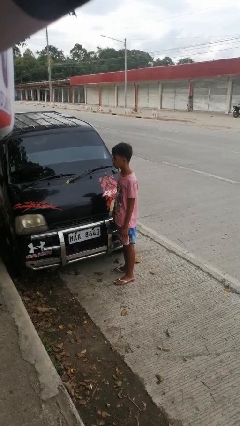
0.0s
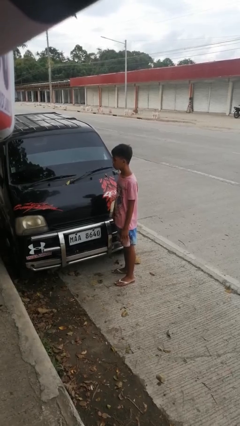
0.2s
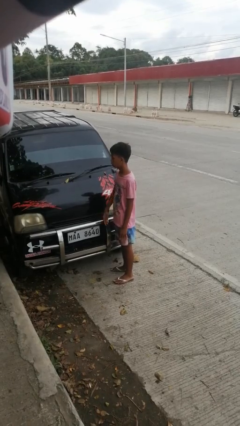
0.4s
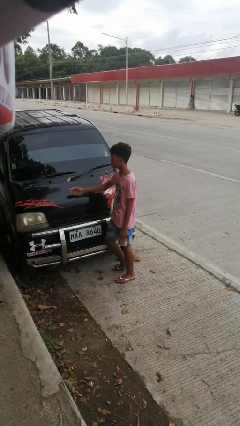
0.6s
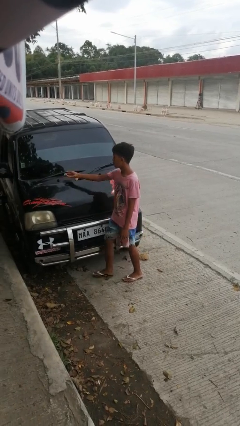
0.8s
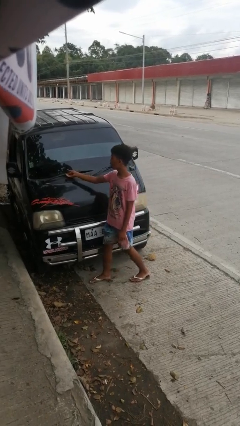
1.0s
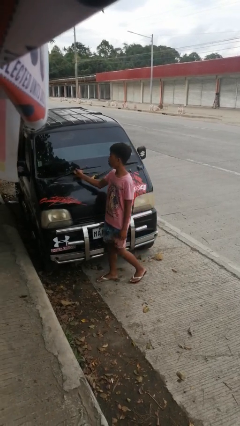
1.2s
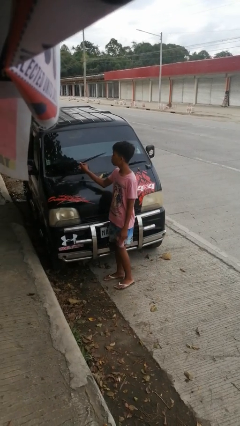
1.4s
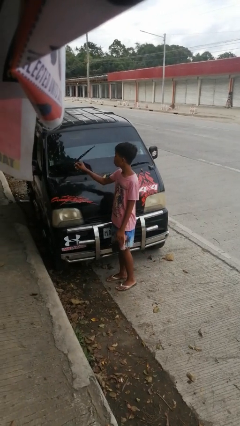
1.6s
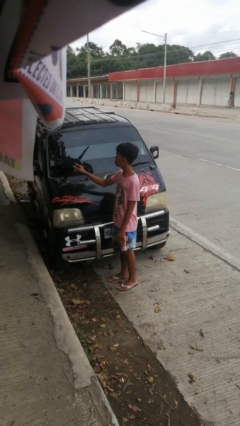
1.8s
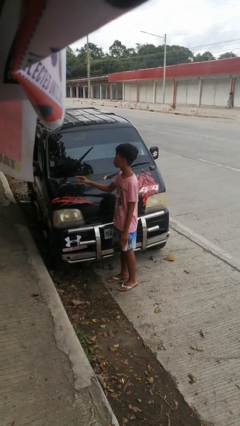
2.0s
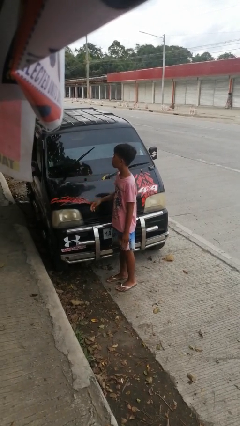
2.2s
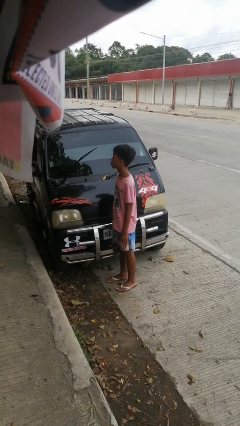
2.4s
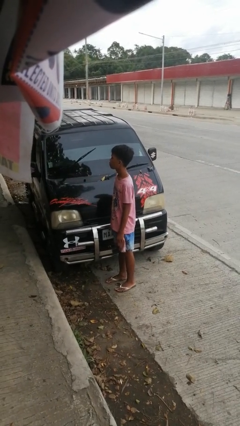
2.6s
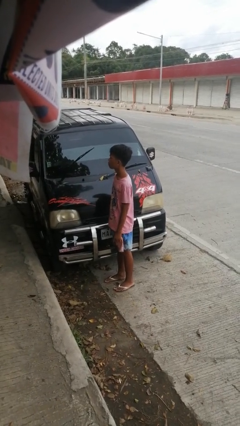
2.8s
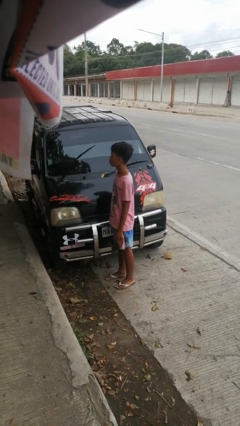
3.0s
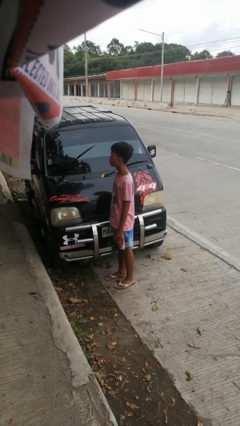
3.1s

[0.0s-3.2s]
person flips up car wipers

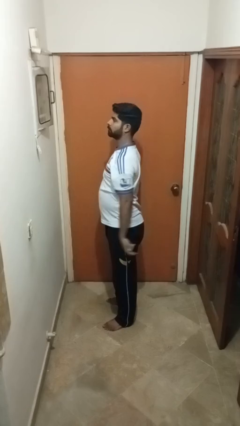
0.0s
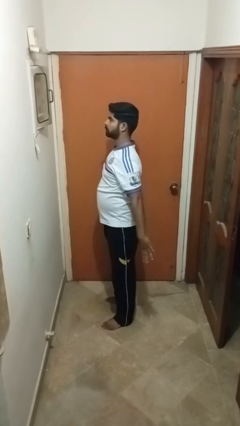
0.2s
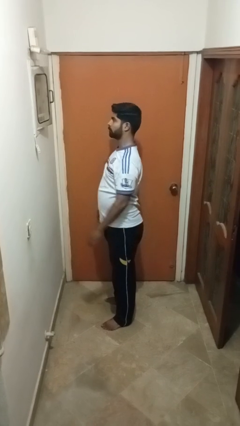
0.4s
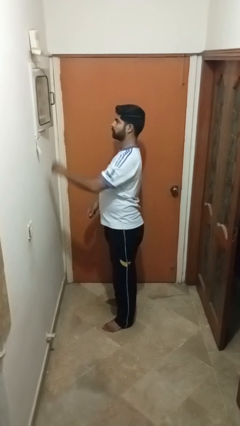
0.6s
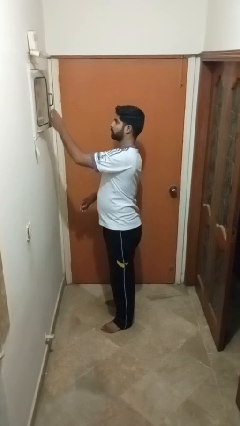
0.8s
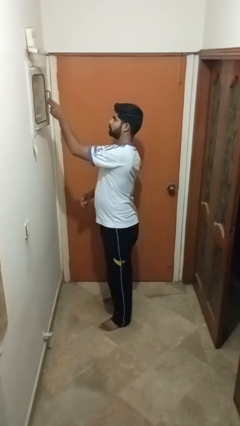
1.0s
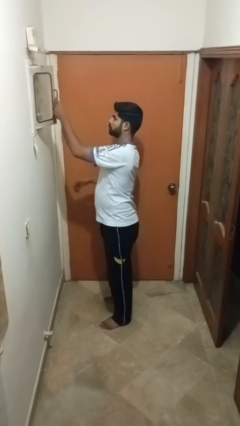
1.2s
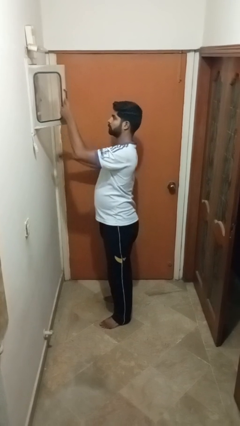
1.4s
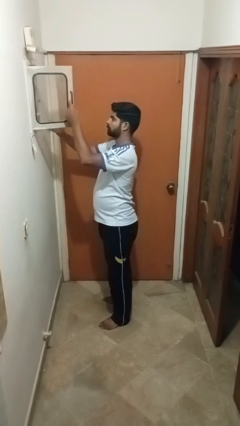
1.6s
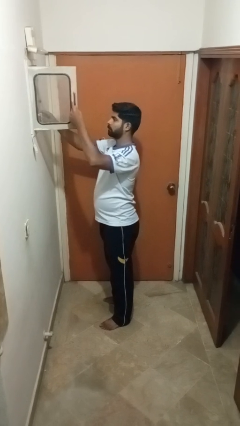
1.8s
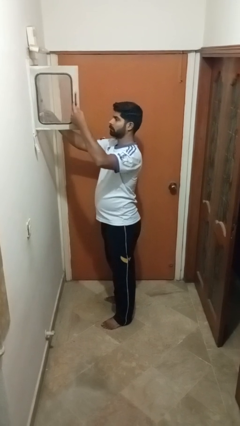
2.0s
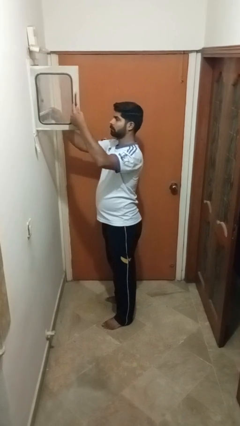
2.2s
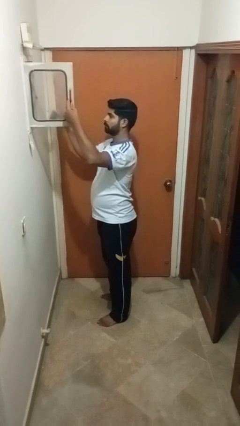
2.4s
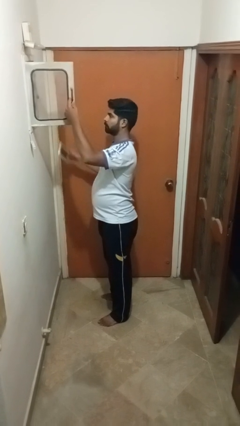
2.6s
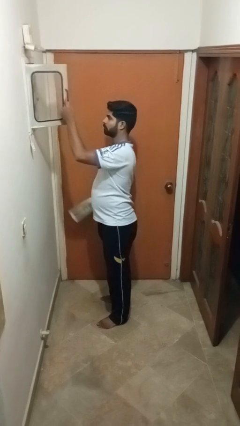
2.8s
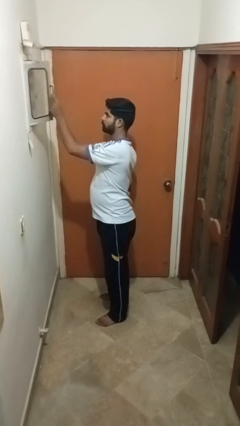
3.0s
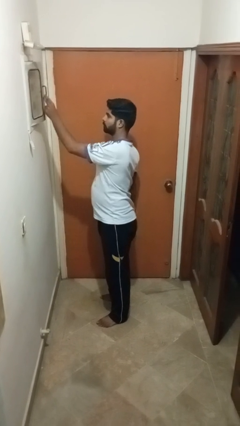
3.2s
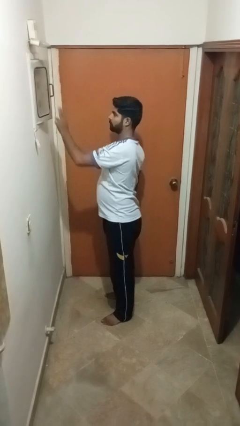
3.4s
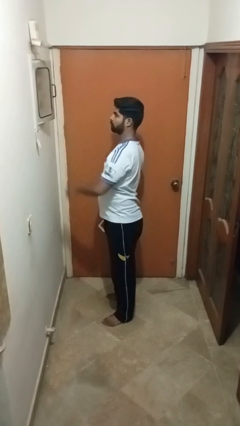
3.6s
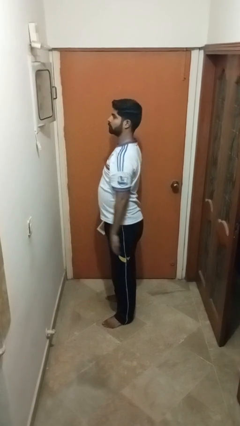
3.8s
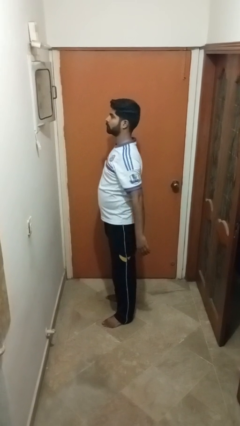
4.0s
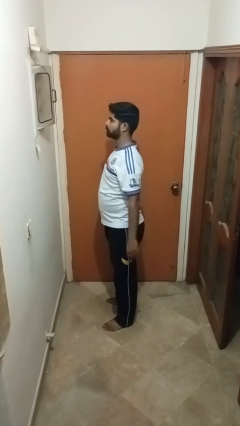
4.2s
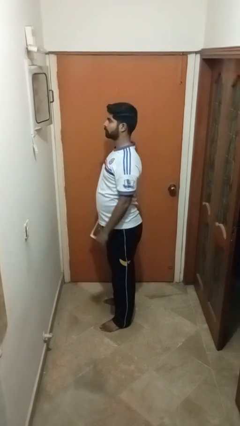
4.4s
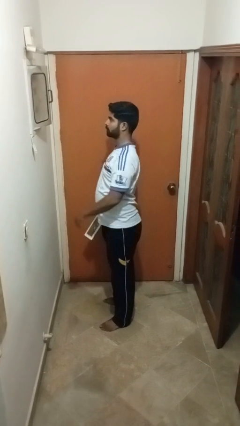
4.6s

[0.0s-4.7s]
person takes letters from mailbox

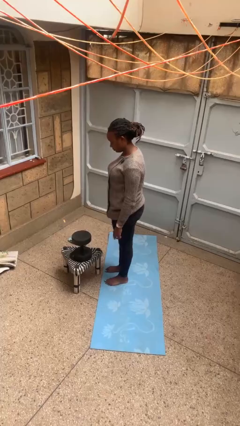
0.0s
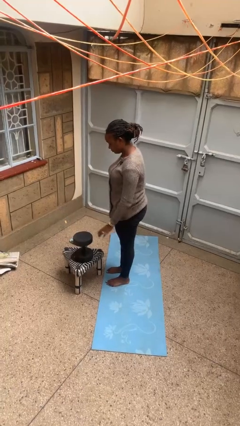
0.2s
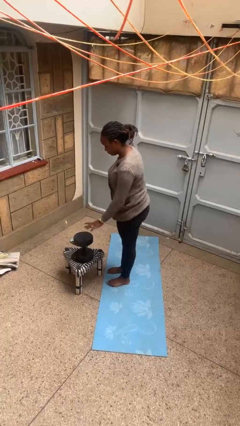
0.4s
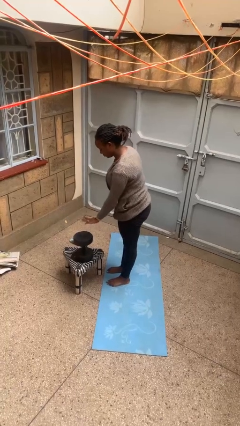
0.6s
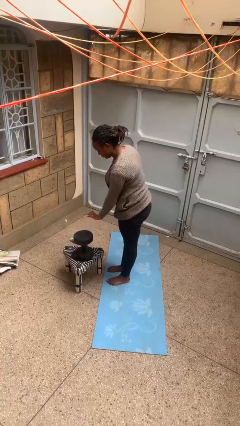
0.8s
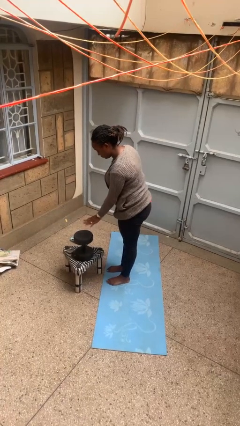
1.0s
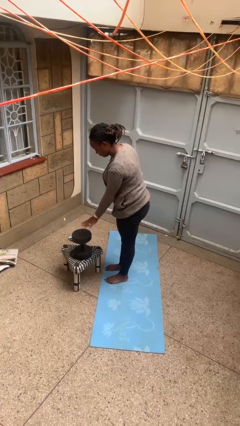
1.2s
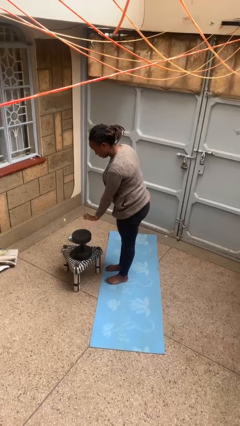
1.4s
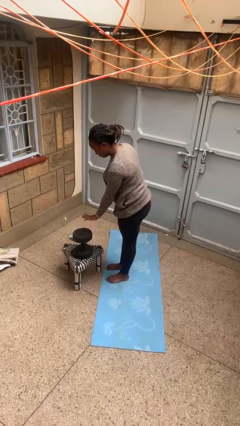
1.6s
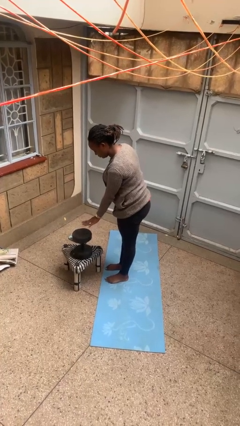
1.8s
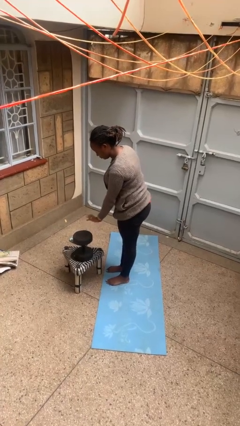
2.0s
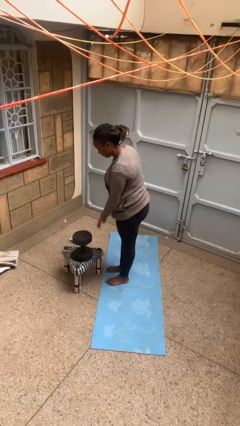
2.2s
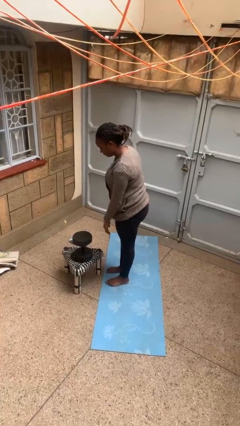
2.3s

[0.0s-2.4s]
person waves hand over object

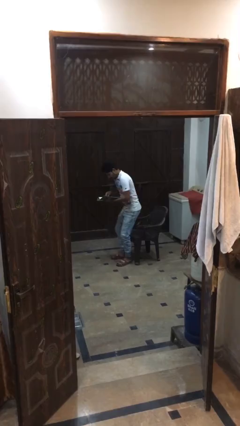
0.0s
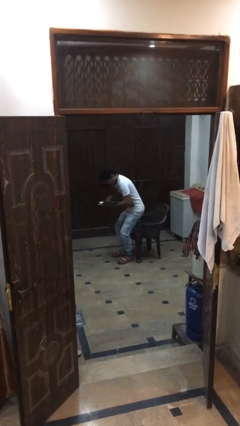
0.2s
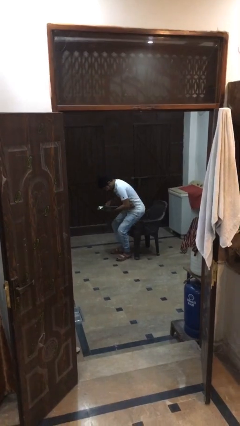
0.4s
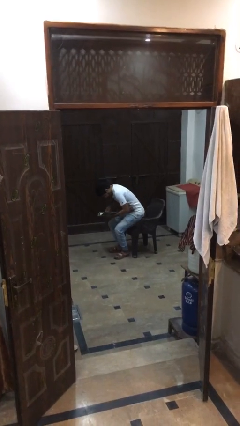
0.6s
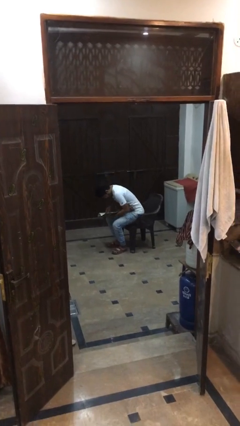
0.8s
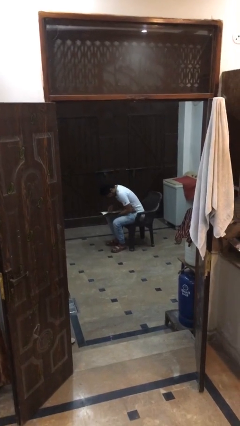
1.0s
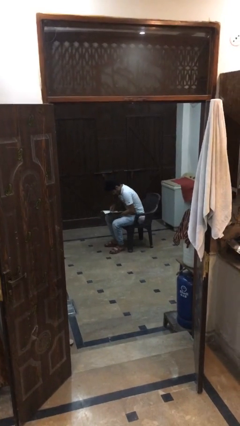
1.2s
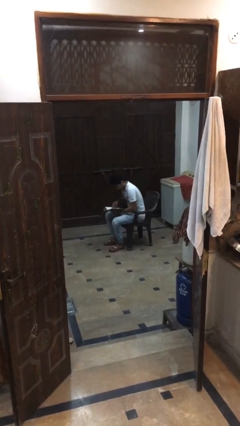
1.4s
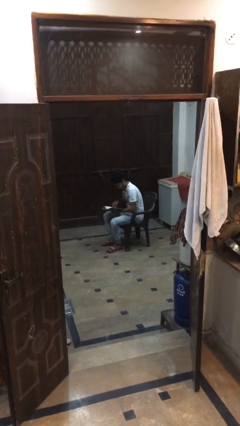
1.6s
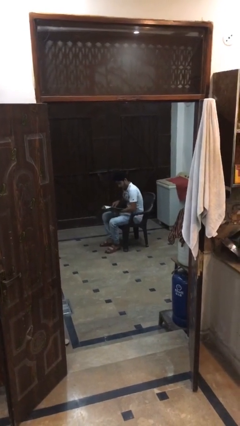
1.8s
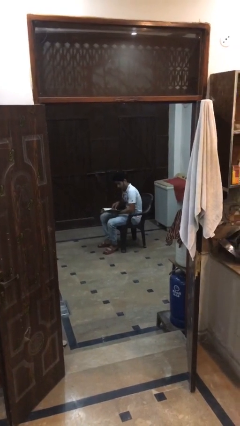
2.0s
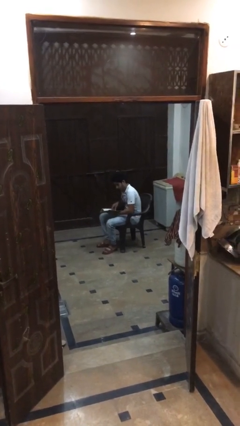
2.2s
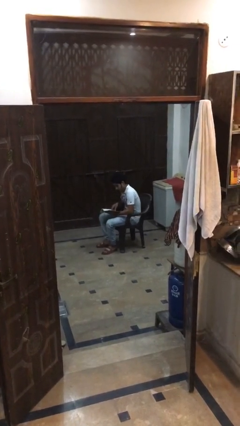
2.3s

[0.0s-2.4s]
person sits down

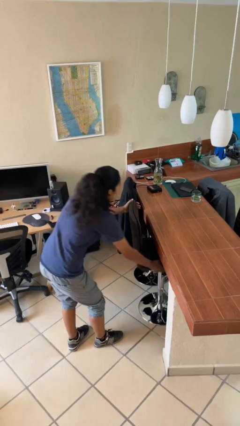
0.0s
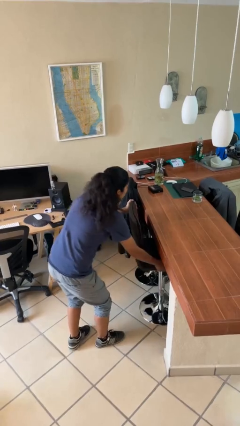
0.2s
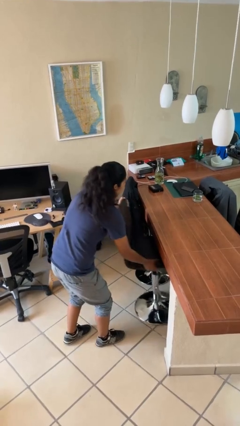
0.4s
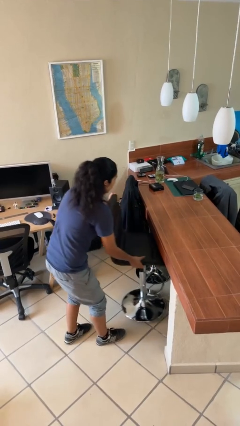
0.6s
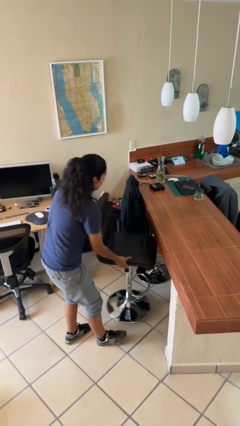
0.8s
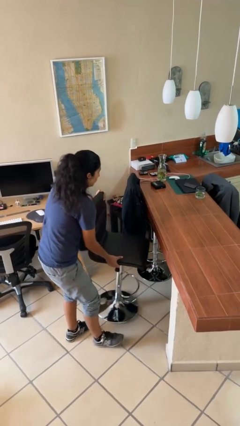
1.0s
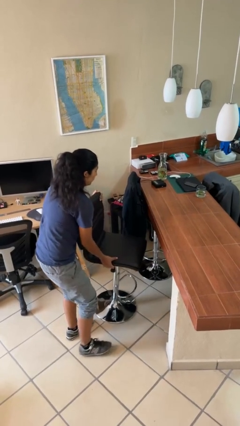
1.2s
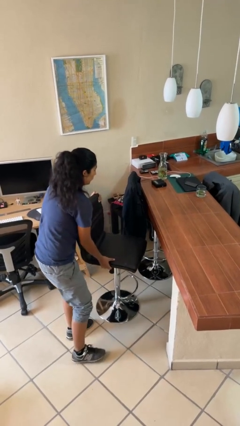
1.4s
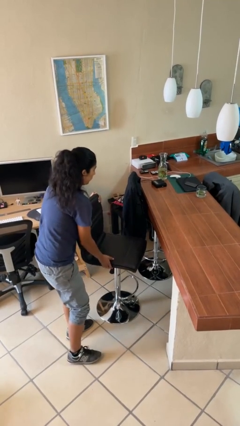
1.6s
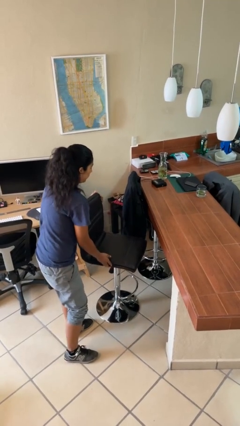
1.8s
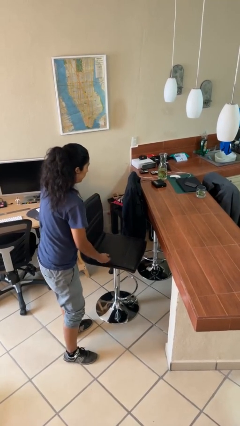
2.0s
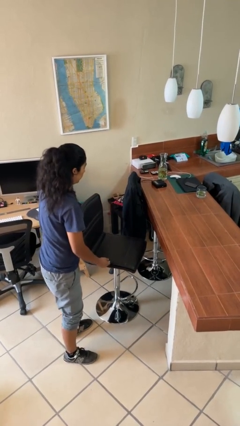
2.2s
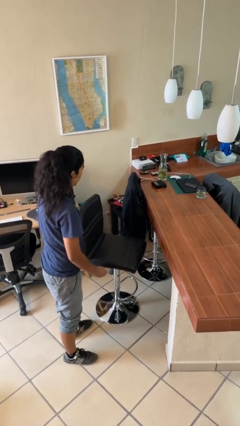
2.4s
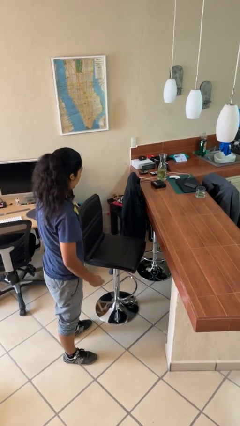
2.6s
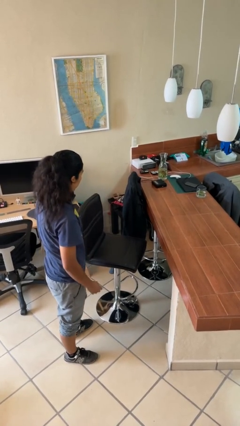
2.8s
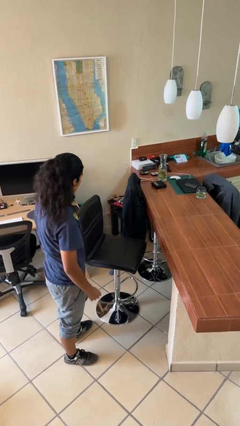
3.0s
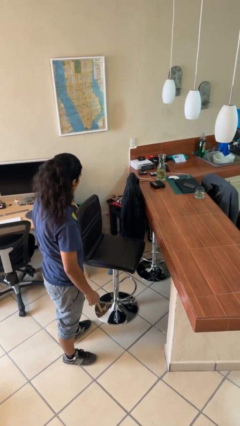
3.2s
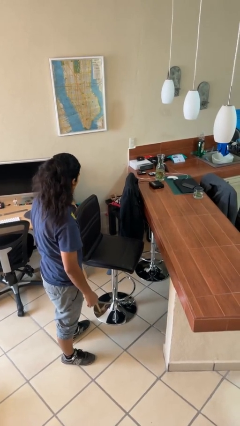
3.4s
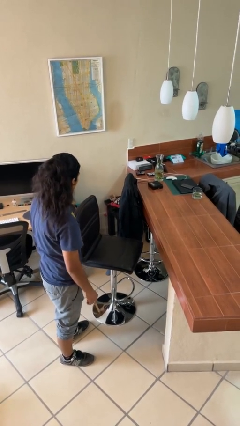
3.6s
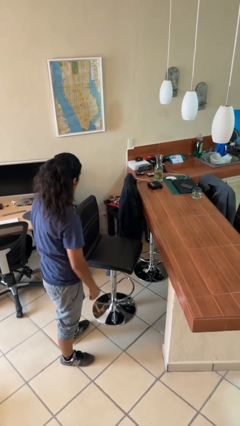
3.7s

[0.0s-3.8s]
person pulls out chair

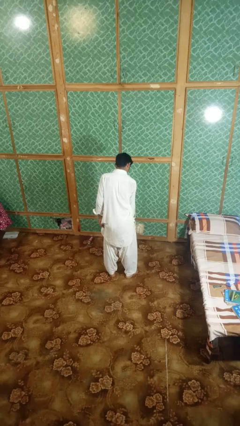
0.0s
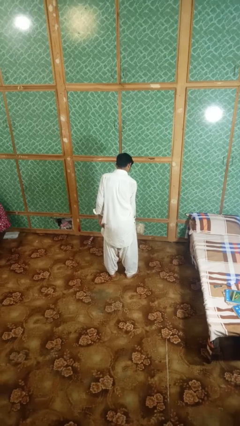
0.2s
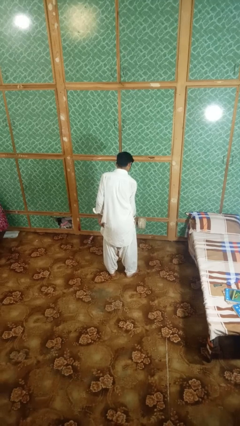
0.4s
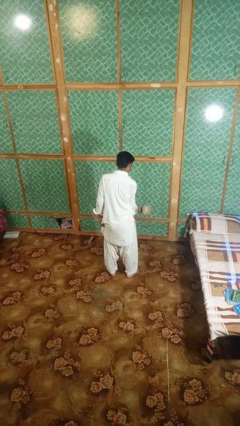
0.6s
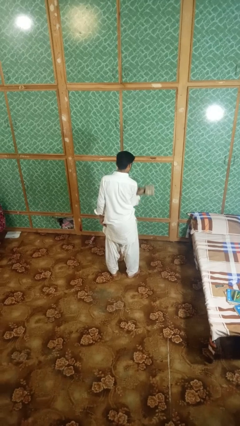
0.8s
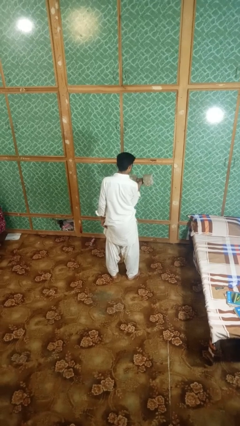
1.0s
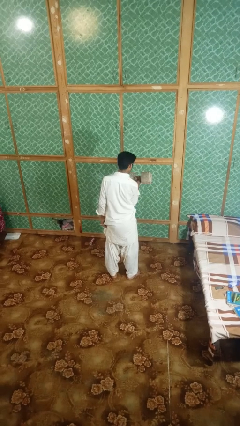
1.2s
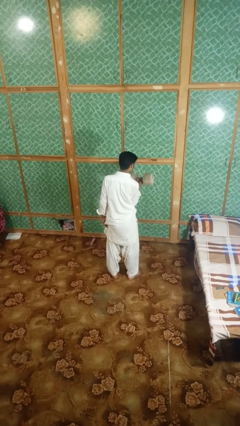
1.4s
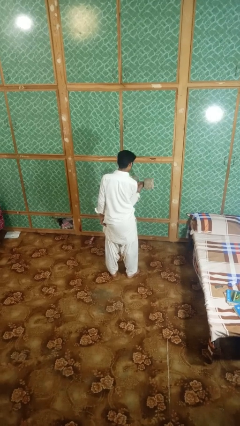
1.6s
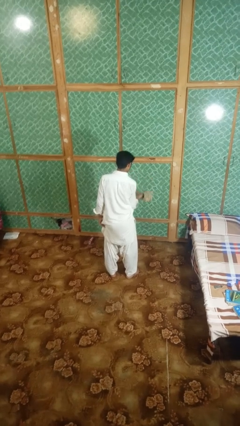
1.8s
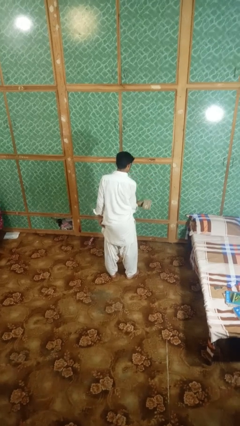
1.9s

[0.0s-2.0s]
person lifts dumbbells
